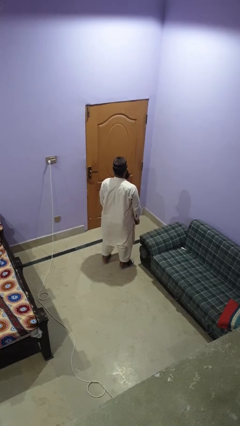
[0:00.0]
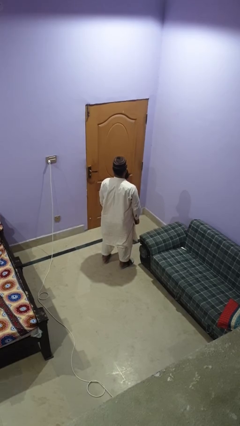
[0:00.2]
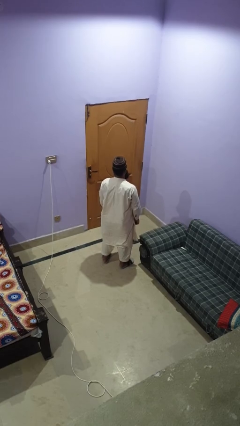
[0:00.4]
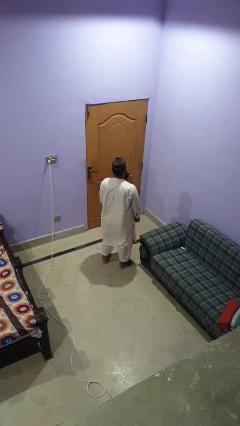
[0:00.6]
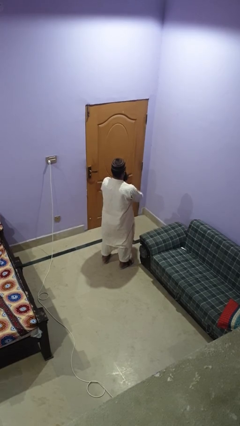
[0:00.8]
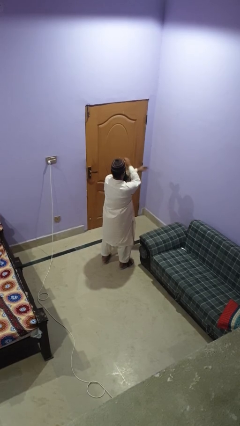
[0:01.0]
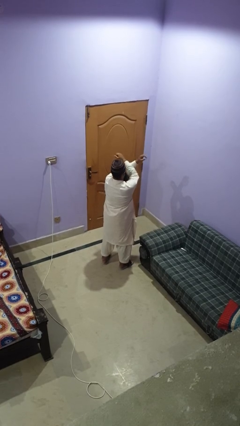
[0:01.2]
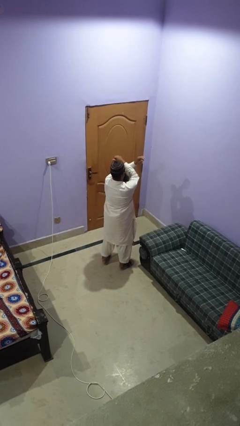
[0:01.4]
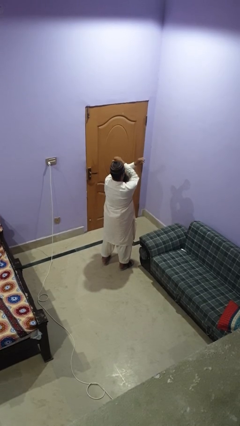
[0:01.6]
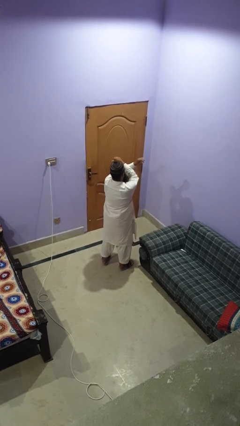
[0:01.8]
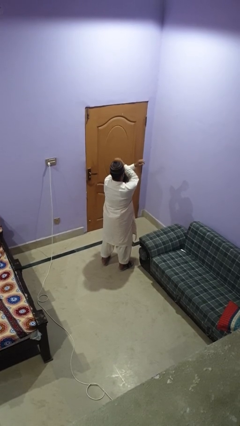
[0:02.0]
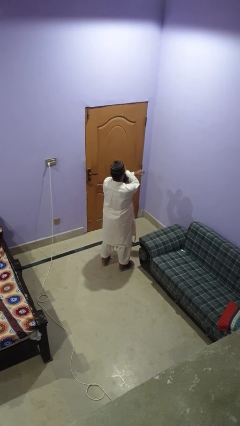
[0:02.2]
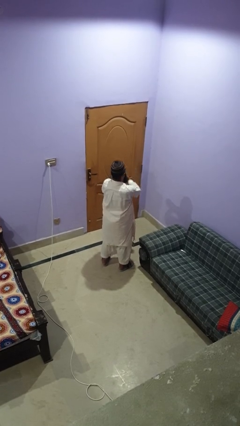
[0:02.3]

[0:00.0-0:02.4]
person gestures arms x

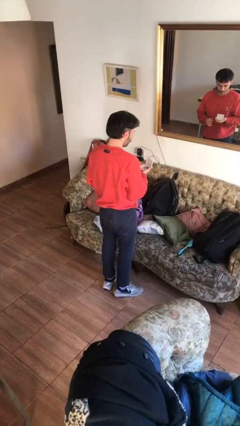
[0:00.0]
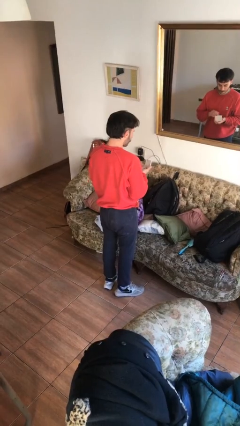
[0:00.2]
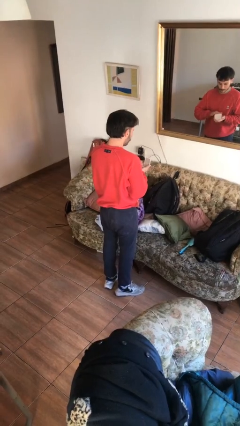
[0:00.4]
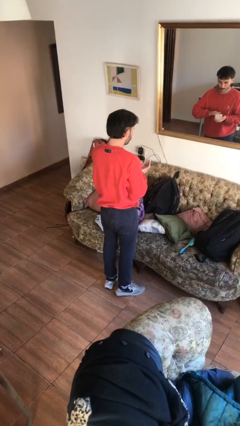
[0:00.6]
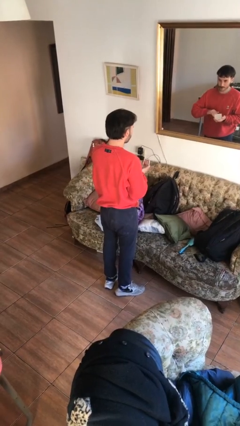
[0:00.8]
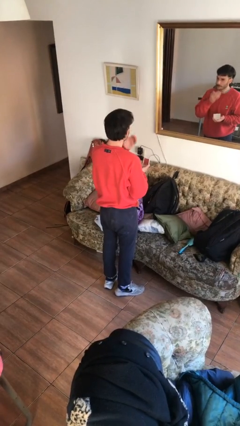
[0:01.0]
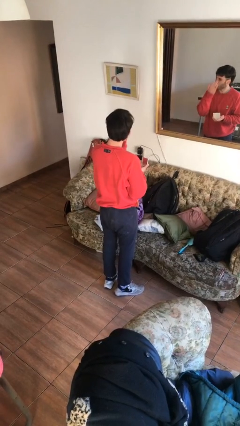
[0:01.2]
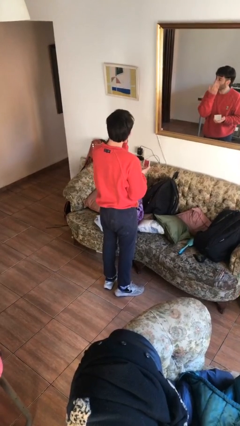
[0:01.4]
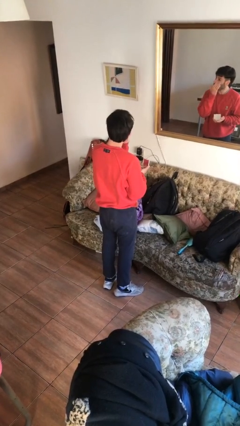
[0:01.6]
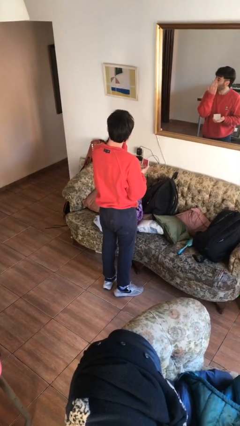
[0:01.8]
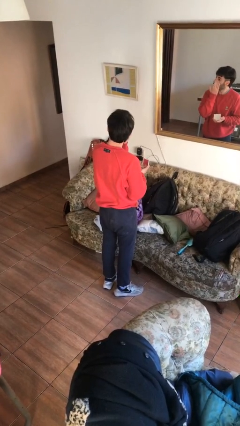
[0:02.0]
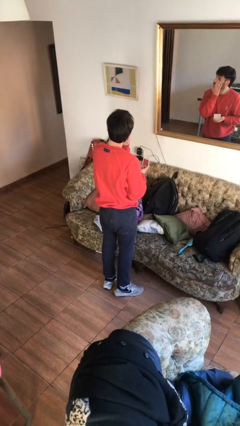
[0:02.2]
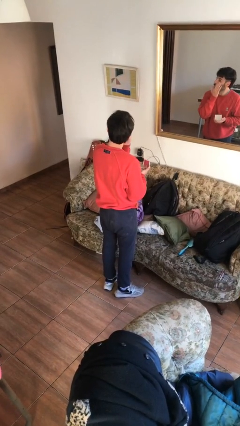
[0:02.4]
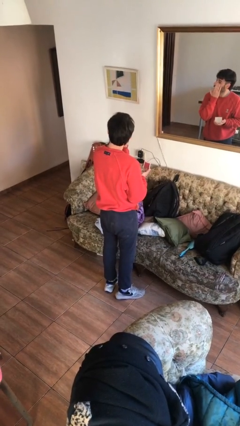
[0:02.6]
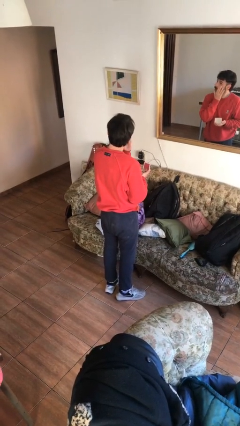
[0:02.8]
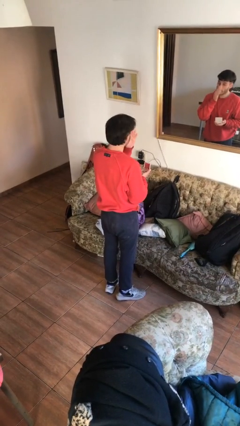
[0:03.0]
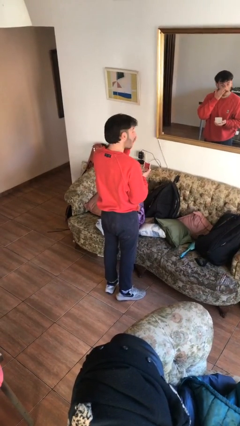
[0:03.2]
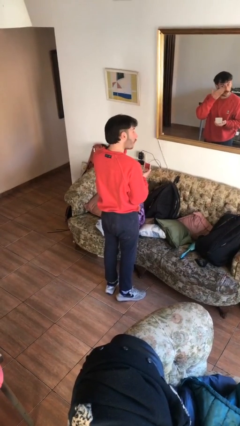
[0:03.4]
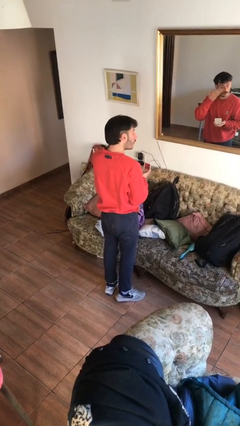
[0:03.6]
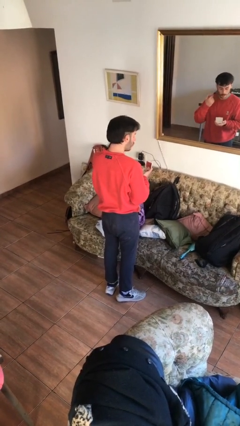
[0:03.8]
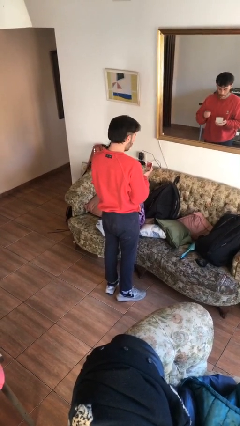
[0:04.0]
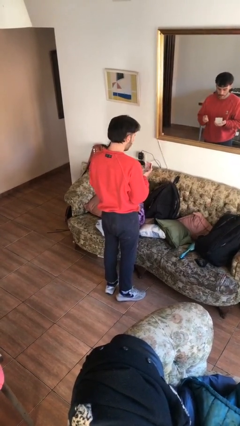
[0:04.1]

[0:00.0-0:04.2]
person applies foundation makeup

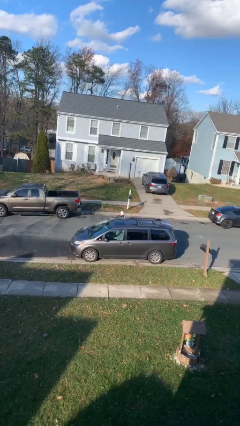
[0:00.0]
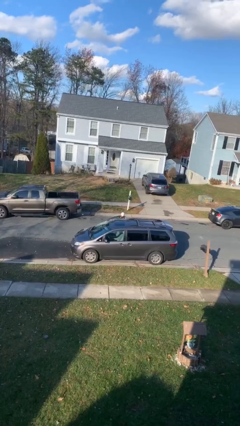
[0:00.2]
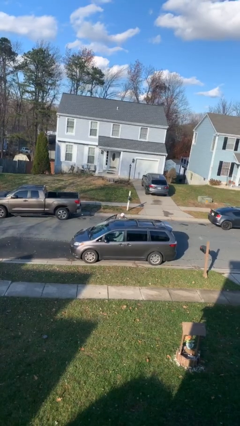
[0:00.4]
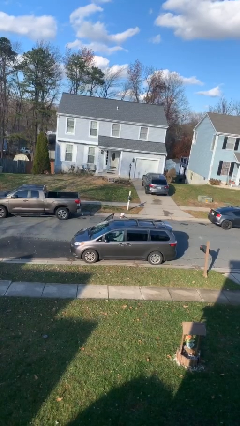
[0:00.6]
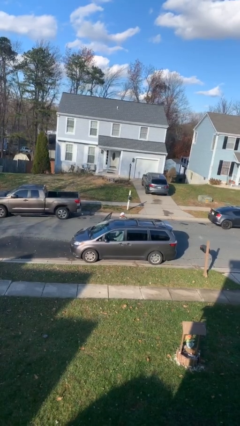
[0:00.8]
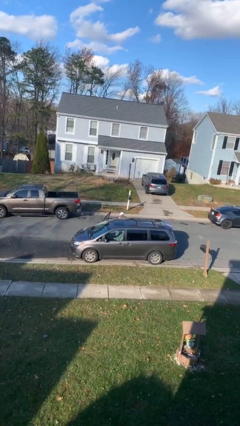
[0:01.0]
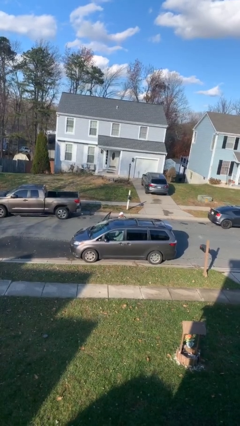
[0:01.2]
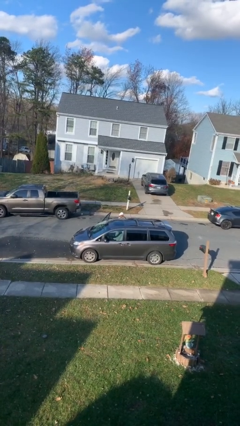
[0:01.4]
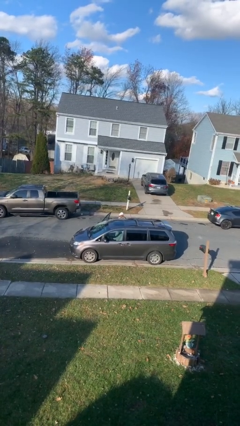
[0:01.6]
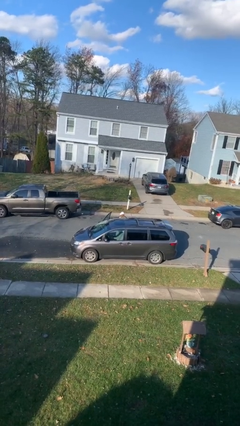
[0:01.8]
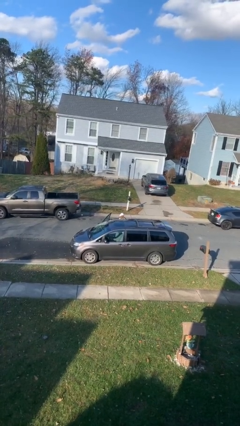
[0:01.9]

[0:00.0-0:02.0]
person opens car door

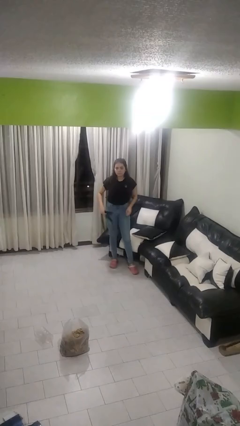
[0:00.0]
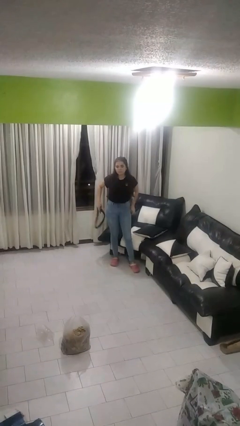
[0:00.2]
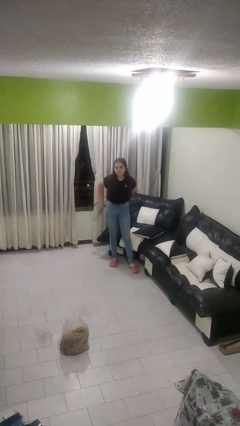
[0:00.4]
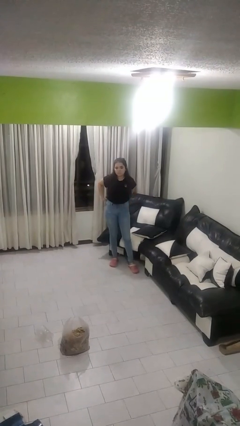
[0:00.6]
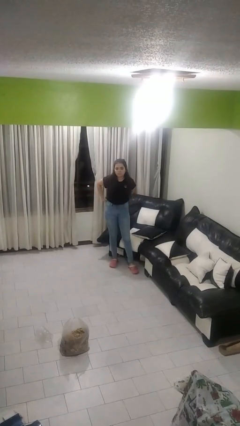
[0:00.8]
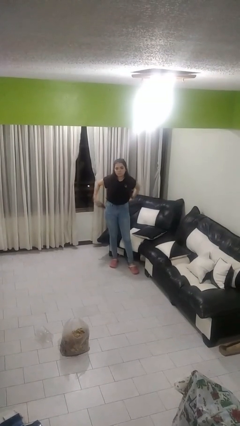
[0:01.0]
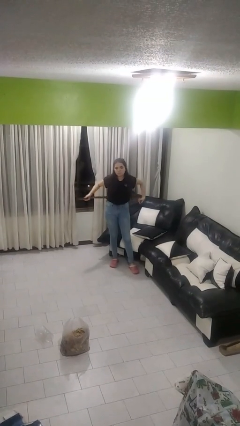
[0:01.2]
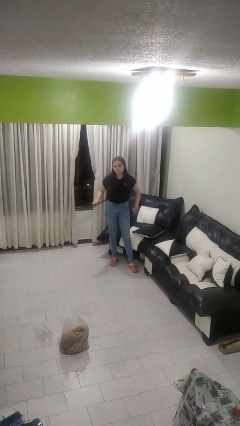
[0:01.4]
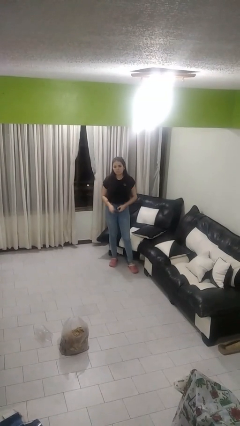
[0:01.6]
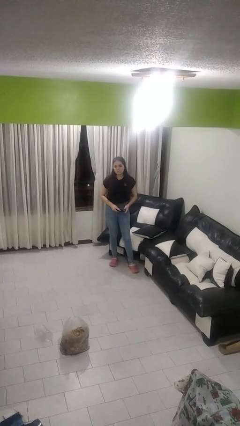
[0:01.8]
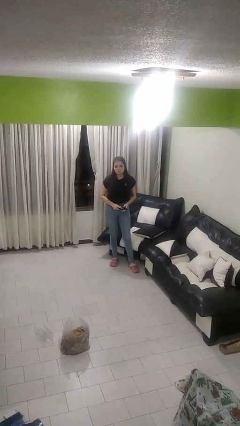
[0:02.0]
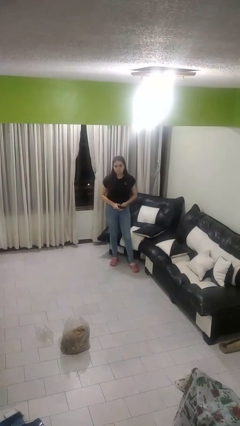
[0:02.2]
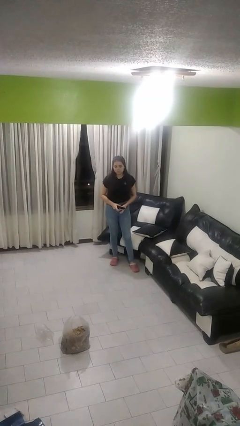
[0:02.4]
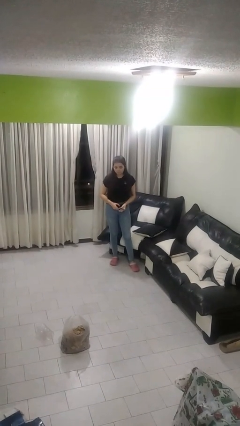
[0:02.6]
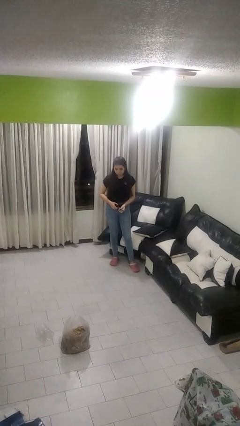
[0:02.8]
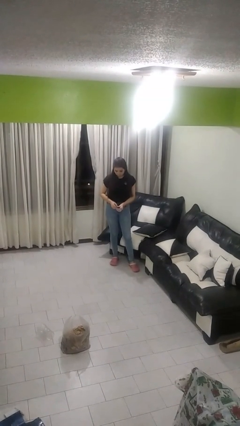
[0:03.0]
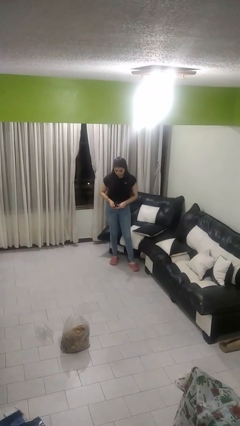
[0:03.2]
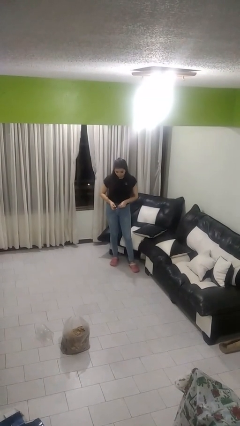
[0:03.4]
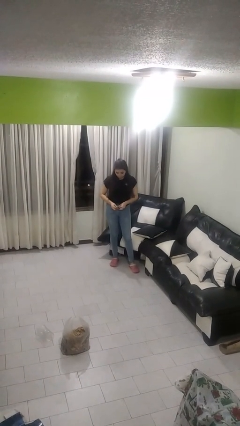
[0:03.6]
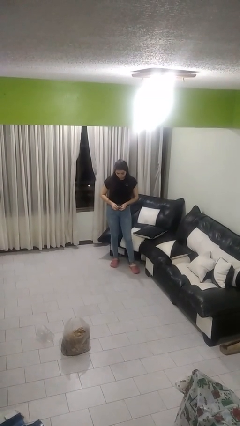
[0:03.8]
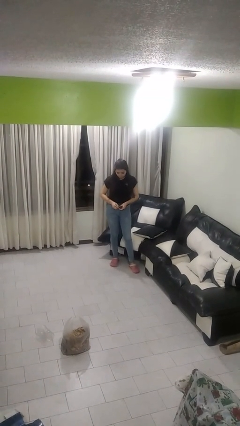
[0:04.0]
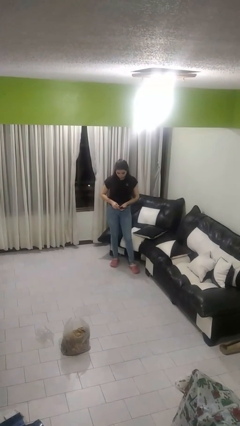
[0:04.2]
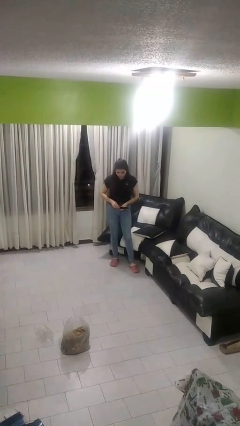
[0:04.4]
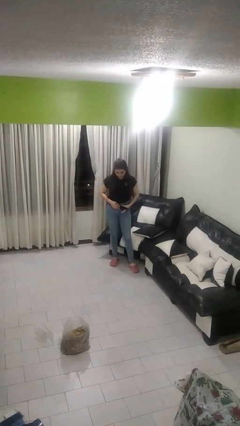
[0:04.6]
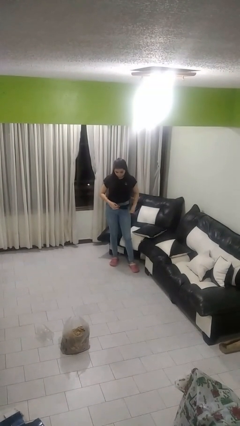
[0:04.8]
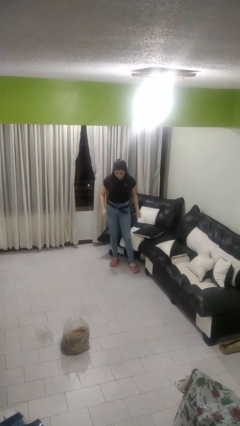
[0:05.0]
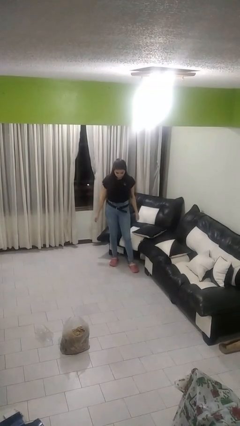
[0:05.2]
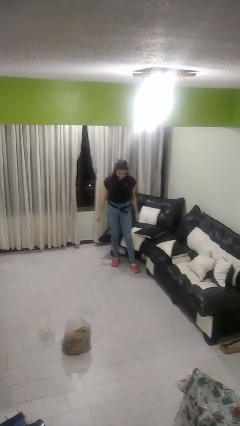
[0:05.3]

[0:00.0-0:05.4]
person puts on belt

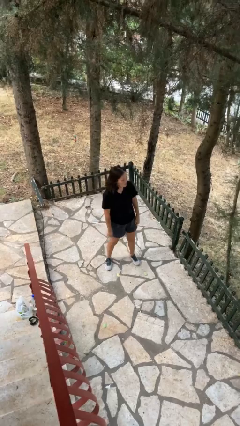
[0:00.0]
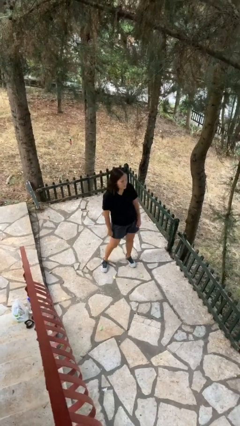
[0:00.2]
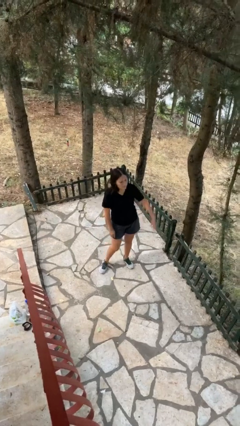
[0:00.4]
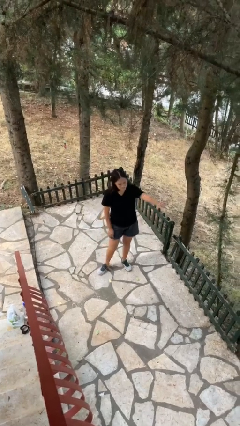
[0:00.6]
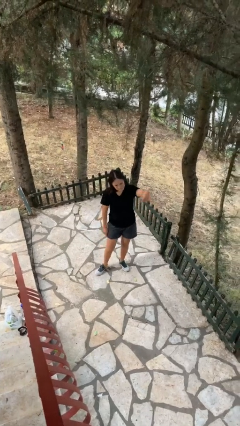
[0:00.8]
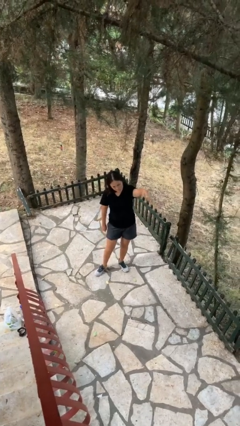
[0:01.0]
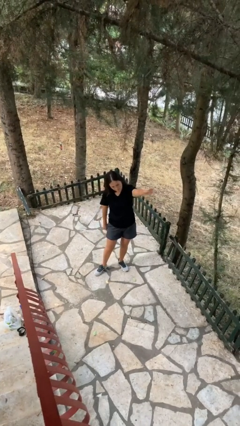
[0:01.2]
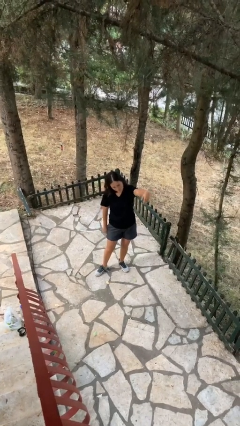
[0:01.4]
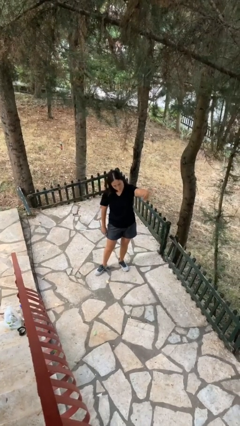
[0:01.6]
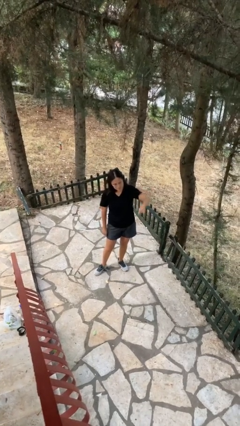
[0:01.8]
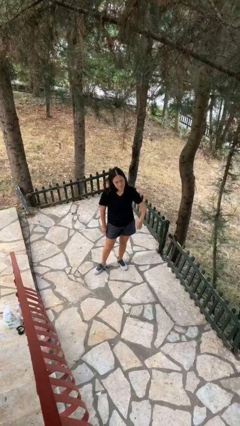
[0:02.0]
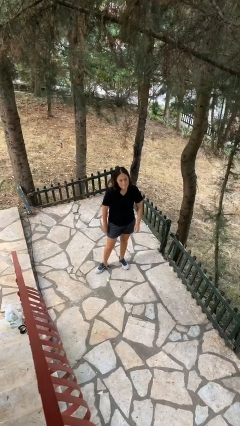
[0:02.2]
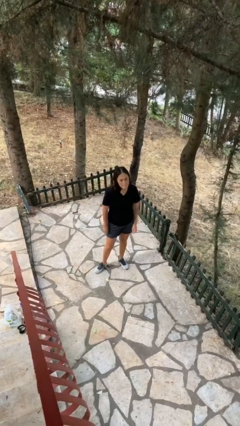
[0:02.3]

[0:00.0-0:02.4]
person gestures come here

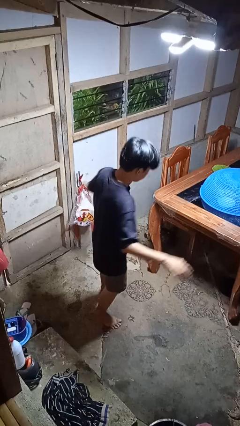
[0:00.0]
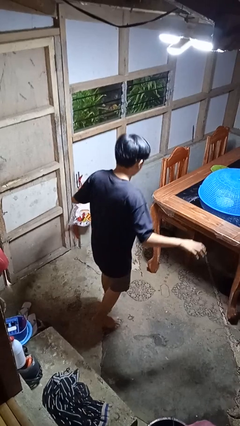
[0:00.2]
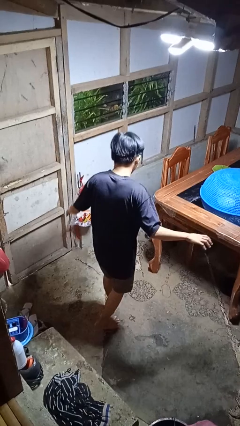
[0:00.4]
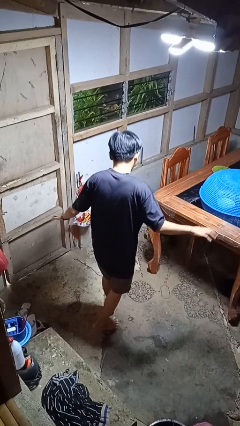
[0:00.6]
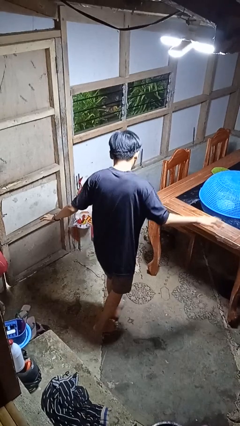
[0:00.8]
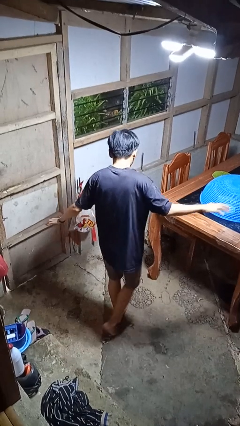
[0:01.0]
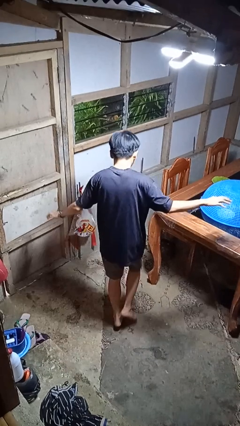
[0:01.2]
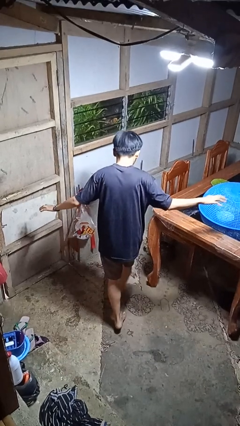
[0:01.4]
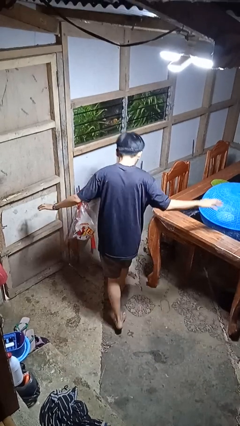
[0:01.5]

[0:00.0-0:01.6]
person walks tiptoe
